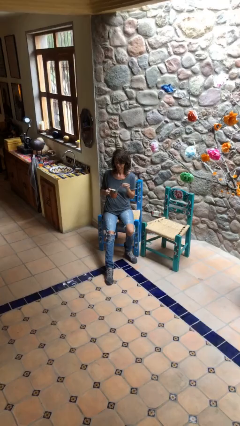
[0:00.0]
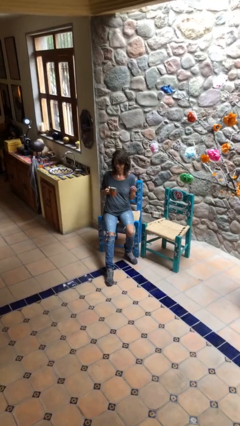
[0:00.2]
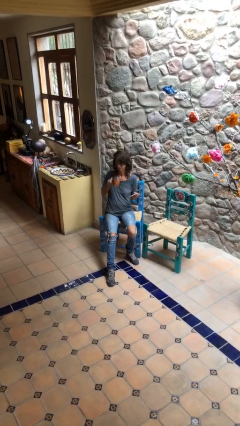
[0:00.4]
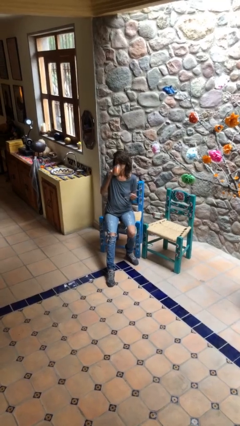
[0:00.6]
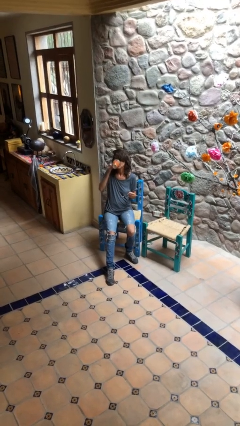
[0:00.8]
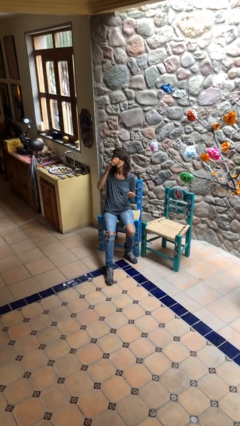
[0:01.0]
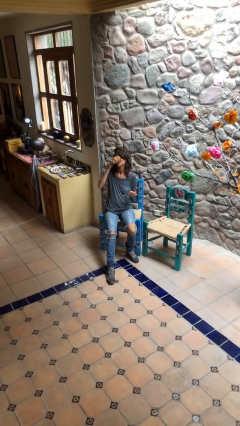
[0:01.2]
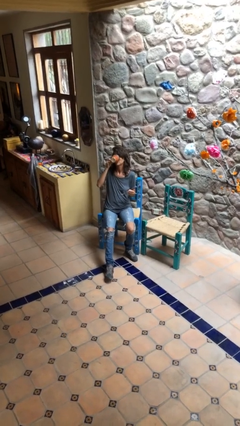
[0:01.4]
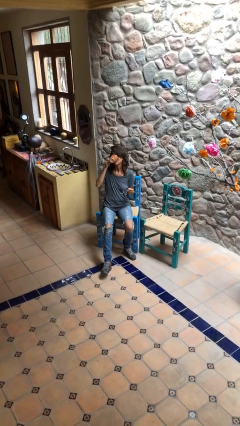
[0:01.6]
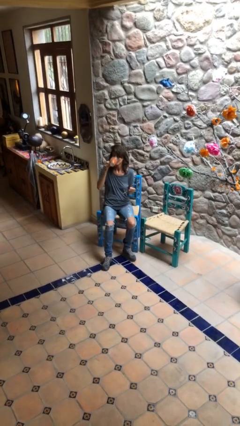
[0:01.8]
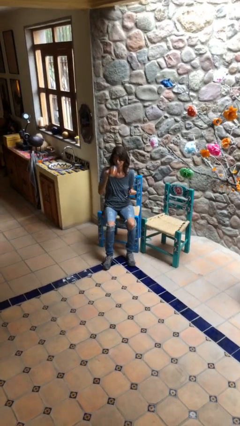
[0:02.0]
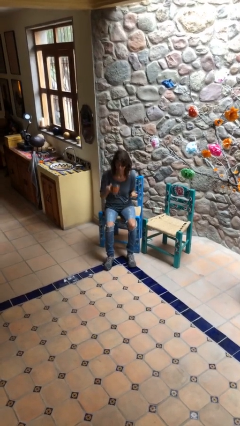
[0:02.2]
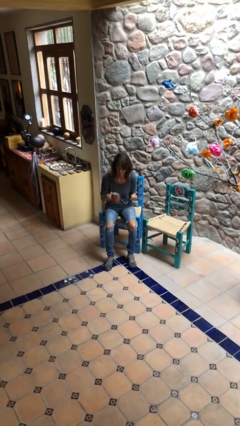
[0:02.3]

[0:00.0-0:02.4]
person drinks from mug

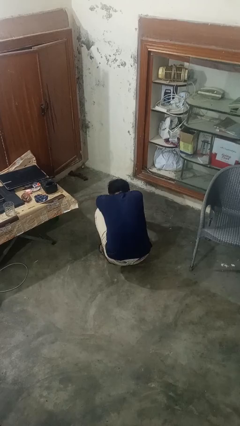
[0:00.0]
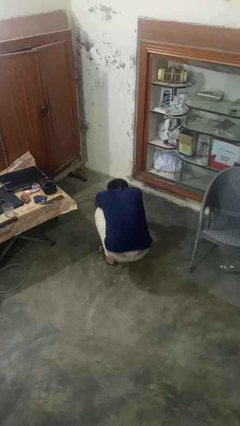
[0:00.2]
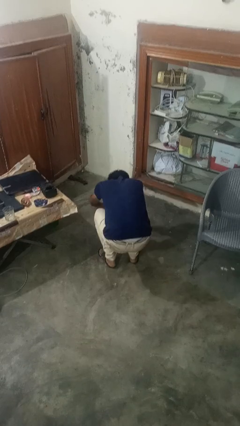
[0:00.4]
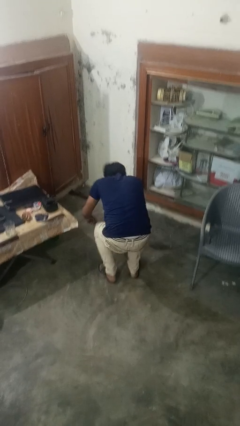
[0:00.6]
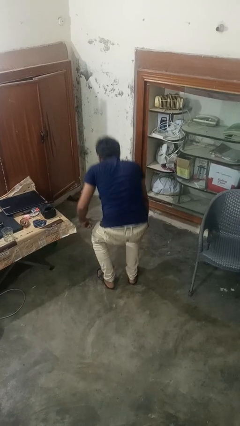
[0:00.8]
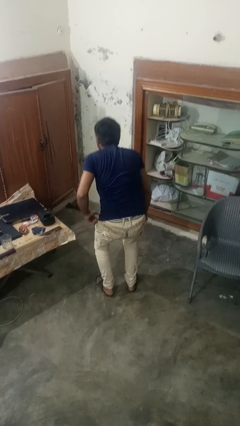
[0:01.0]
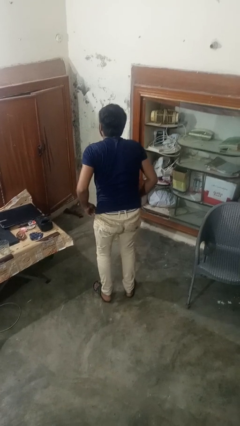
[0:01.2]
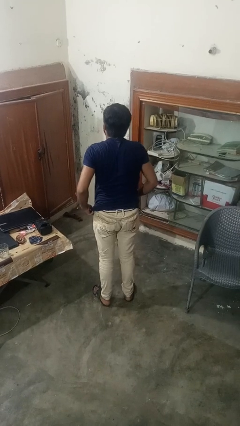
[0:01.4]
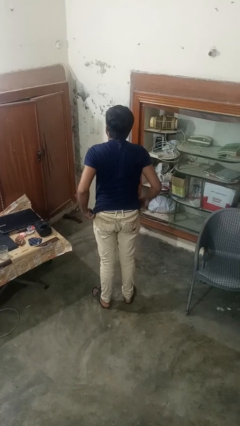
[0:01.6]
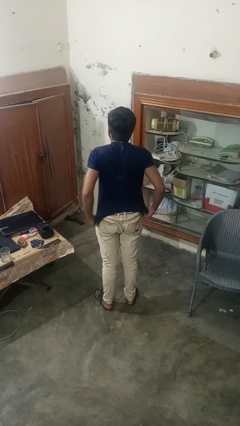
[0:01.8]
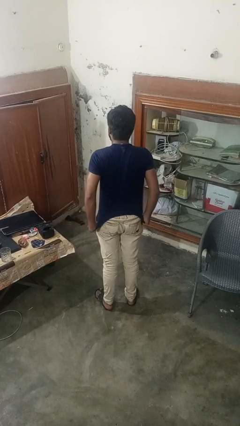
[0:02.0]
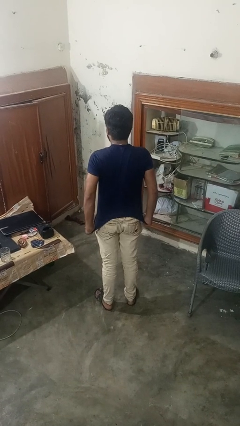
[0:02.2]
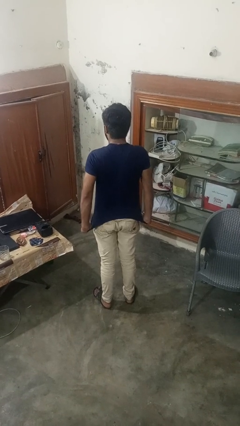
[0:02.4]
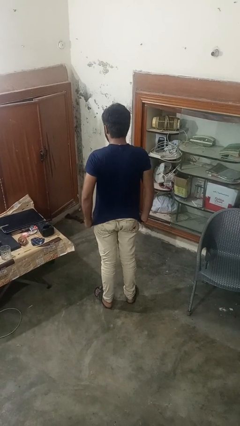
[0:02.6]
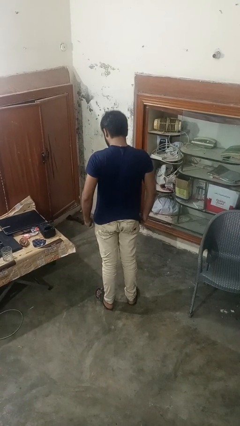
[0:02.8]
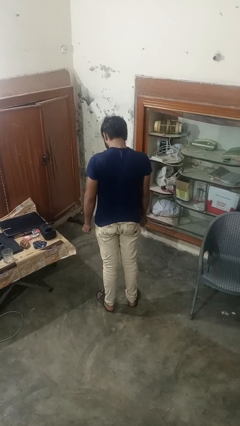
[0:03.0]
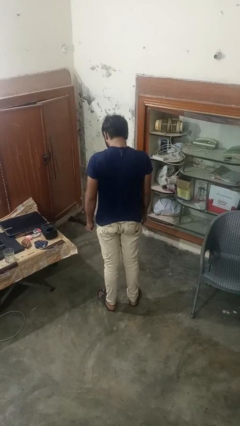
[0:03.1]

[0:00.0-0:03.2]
person stands up

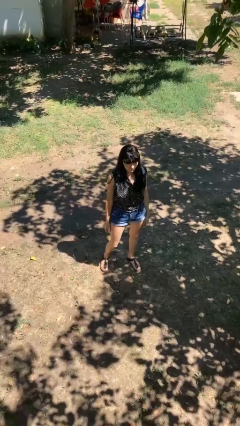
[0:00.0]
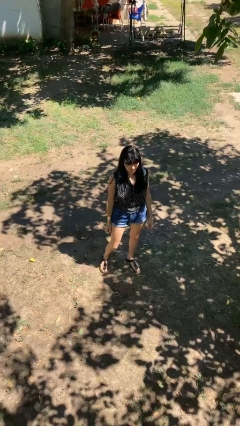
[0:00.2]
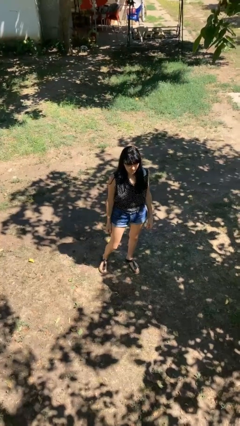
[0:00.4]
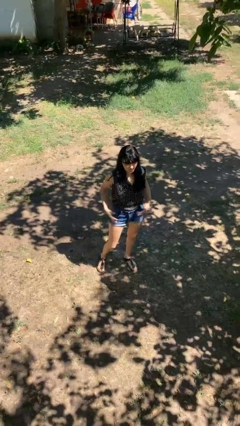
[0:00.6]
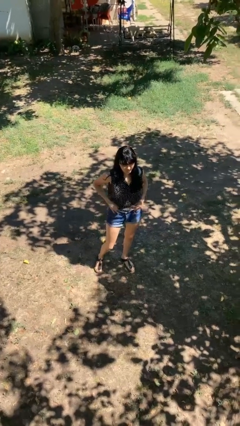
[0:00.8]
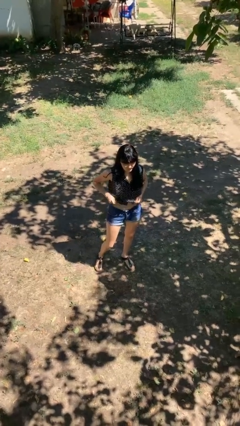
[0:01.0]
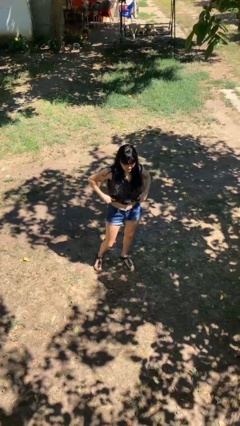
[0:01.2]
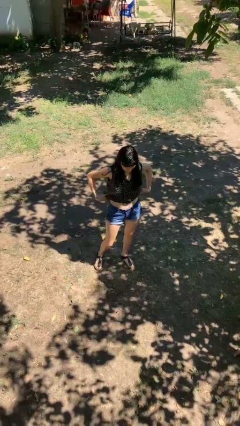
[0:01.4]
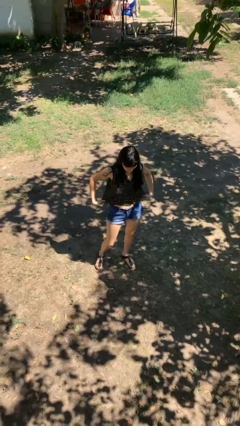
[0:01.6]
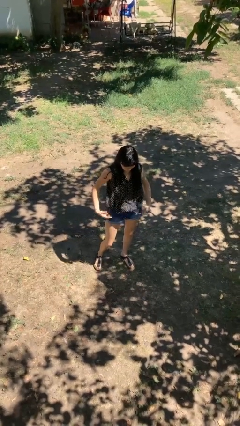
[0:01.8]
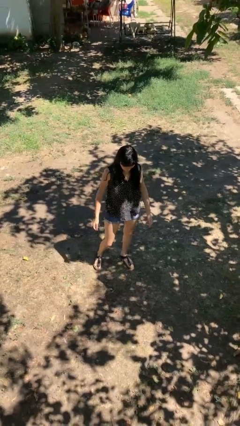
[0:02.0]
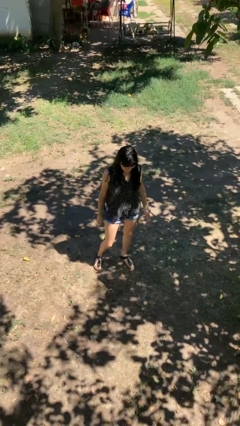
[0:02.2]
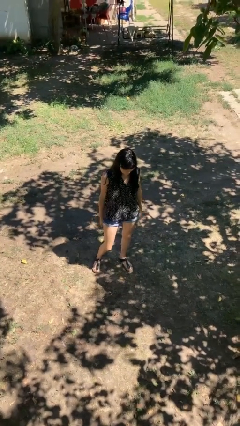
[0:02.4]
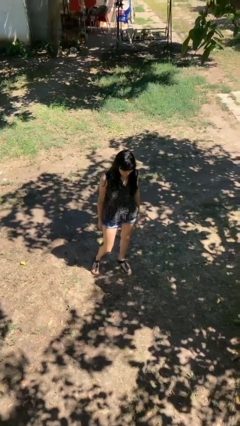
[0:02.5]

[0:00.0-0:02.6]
person untucks shirt

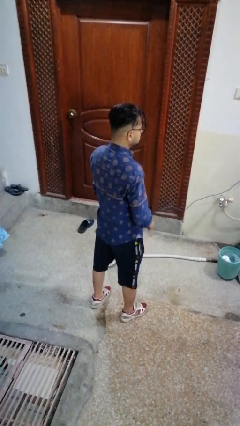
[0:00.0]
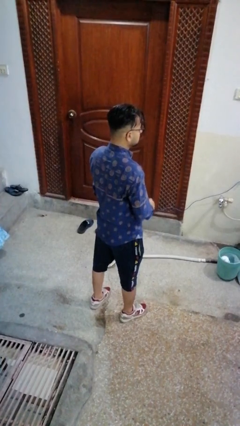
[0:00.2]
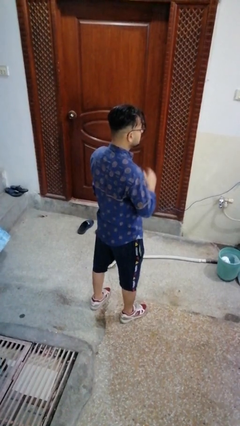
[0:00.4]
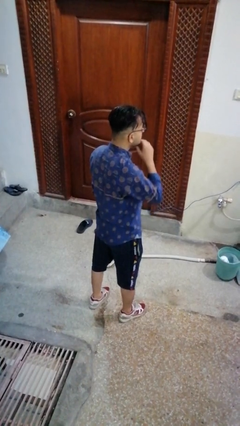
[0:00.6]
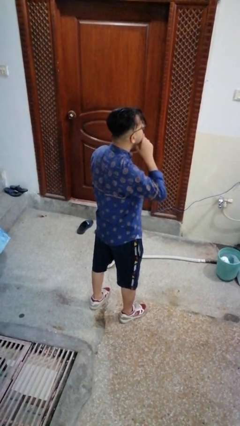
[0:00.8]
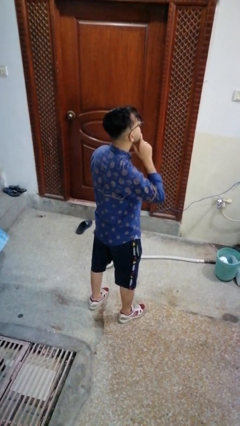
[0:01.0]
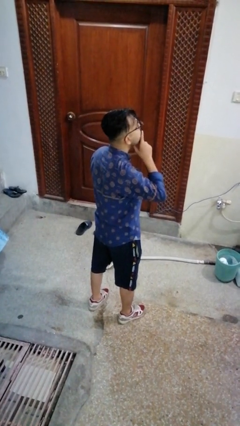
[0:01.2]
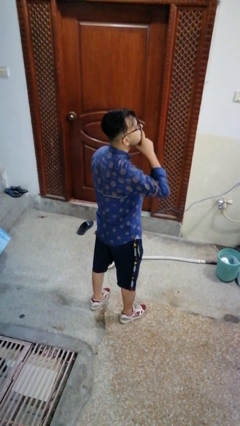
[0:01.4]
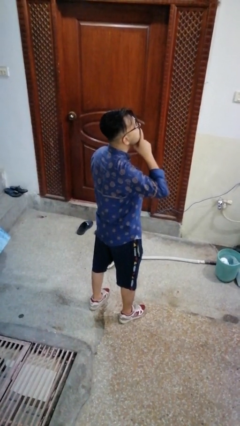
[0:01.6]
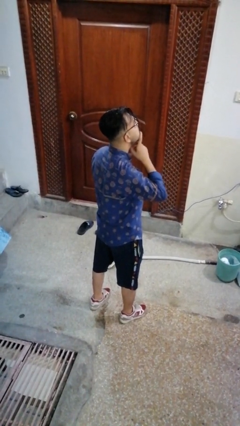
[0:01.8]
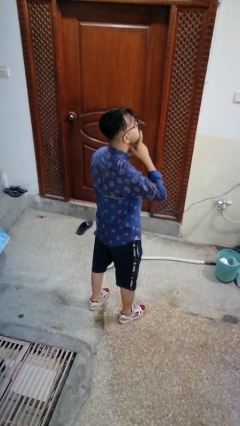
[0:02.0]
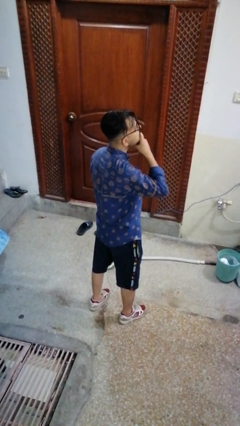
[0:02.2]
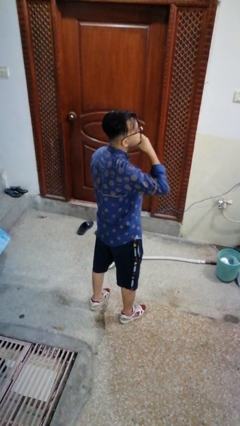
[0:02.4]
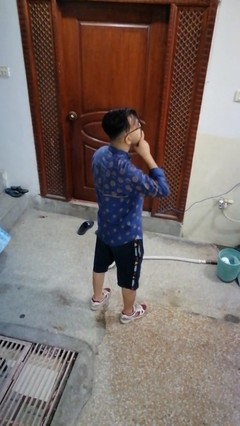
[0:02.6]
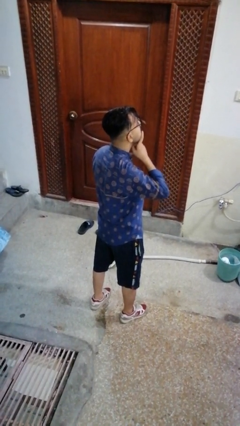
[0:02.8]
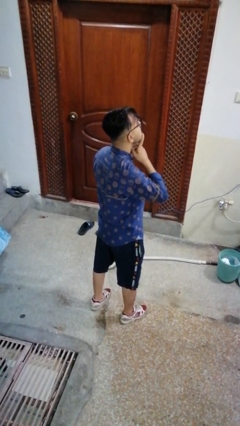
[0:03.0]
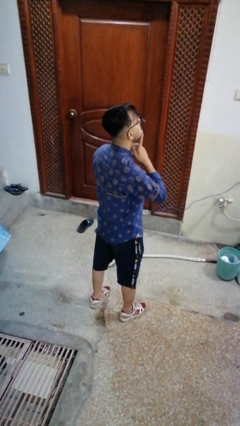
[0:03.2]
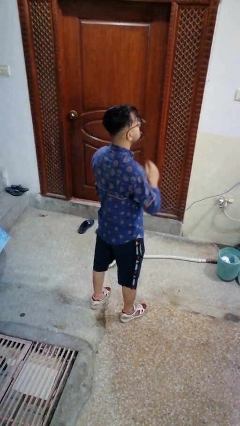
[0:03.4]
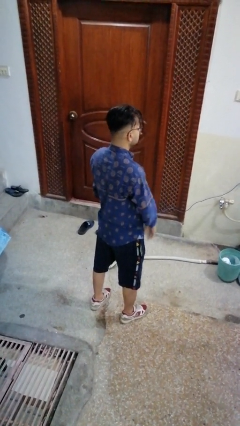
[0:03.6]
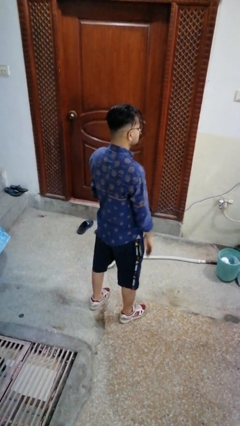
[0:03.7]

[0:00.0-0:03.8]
person strokes chin

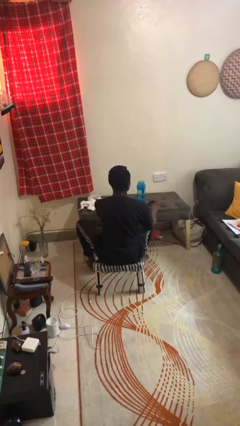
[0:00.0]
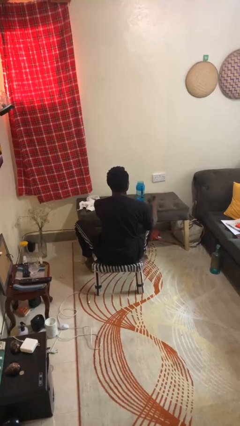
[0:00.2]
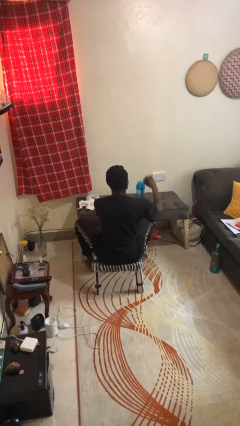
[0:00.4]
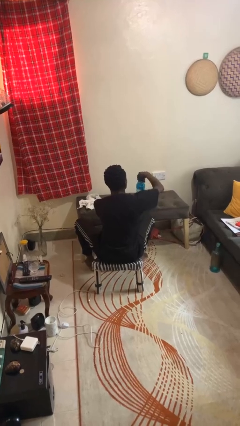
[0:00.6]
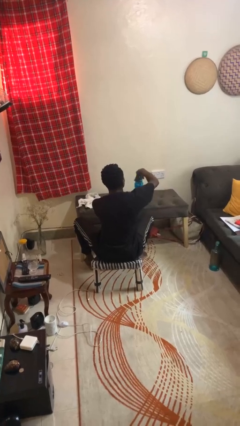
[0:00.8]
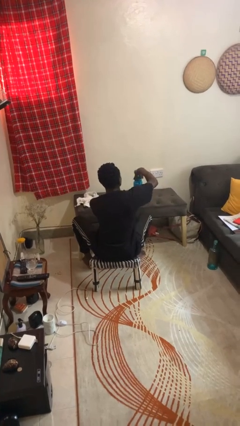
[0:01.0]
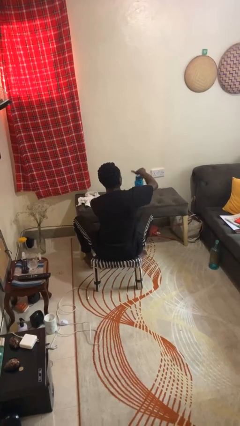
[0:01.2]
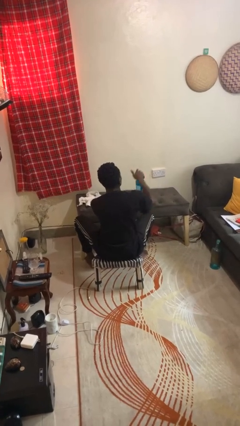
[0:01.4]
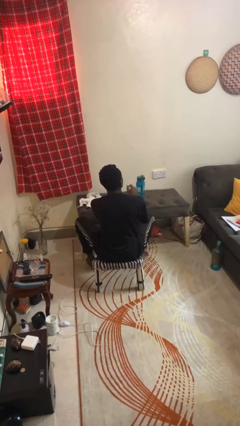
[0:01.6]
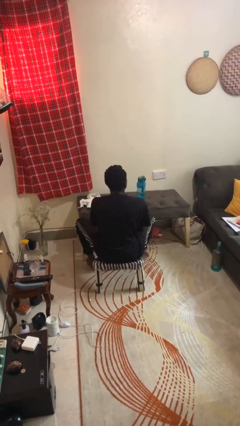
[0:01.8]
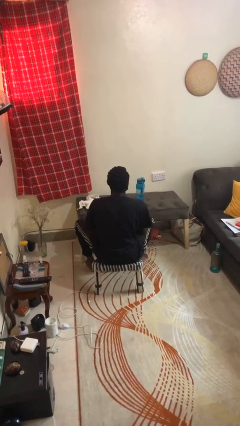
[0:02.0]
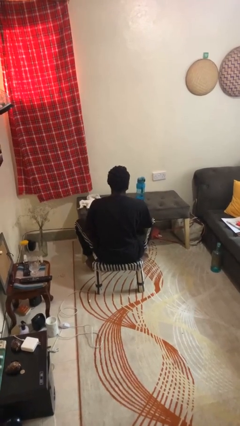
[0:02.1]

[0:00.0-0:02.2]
person closes jar

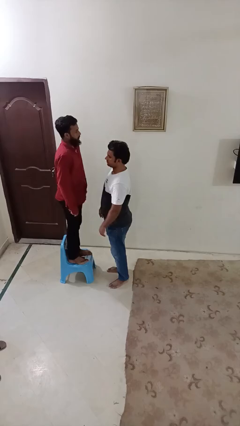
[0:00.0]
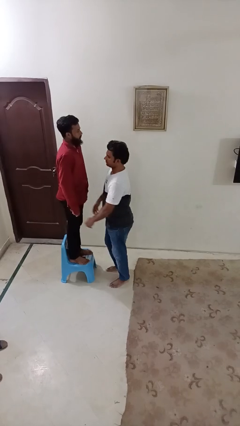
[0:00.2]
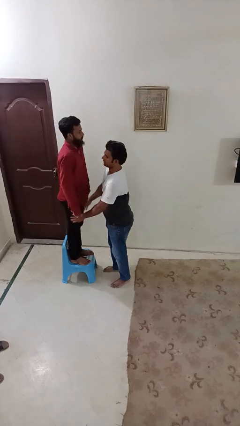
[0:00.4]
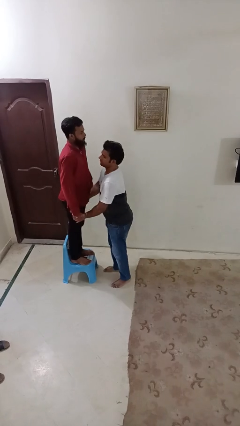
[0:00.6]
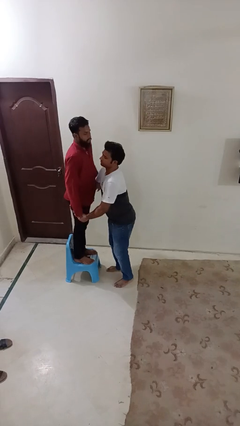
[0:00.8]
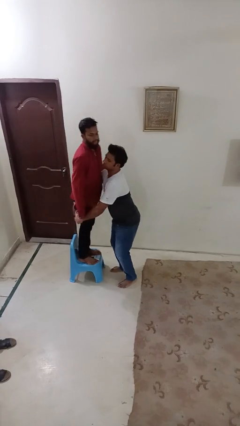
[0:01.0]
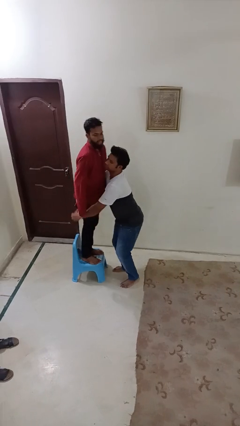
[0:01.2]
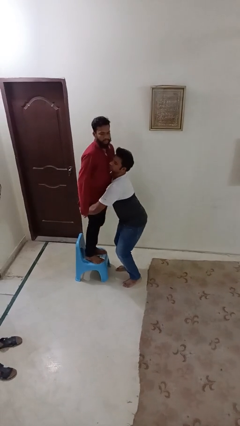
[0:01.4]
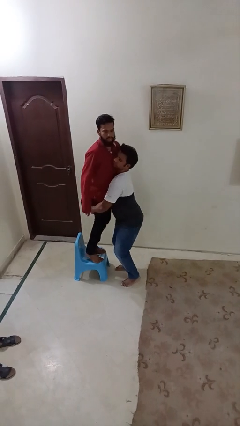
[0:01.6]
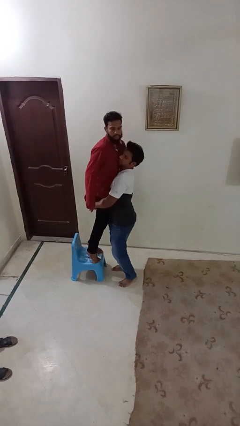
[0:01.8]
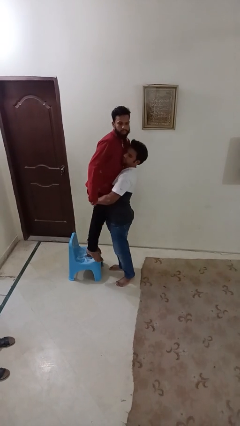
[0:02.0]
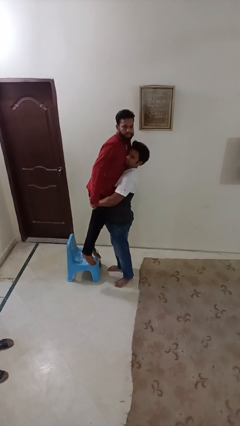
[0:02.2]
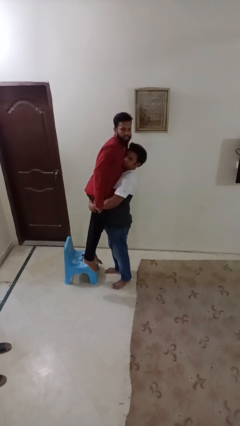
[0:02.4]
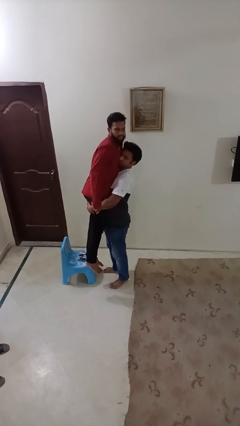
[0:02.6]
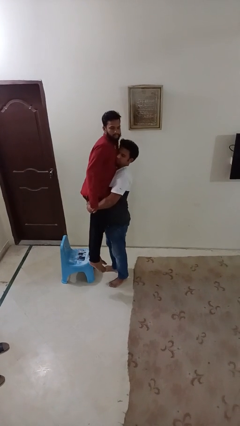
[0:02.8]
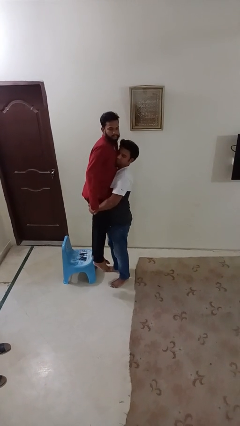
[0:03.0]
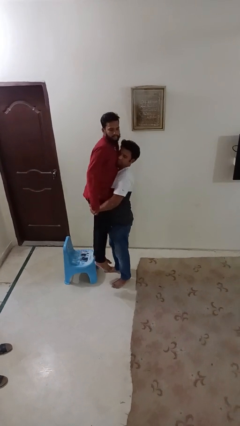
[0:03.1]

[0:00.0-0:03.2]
person picks up person
